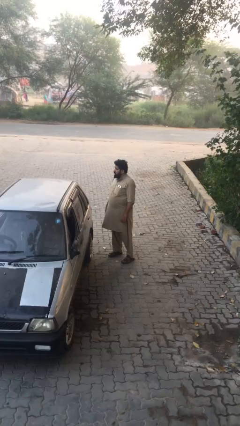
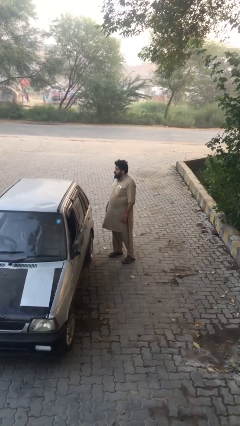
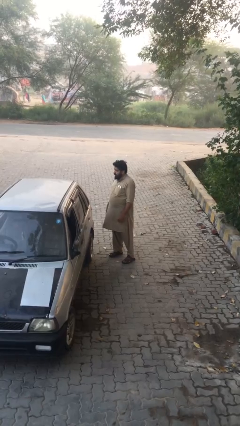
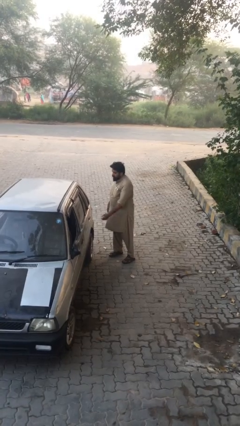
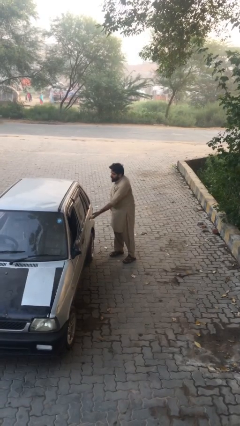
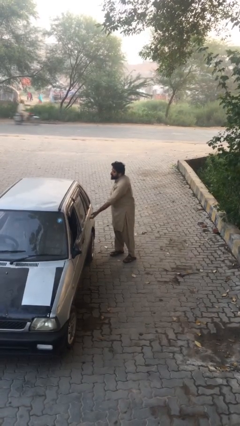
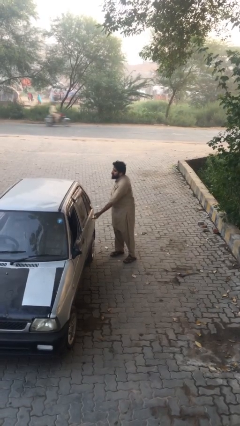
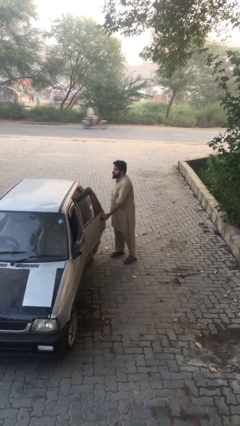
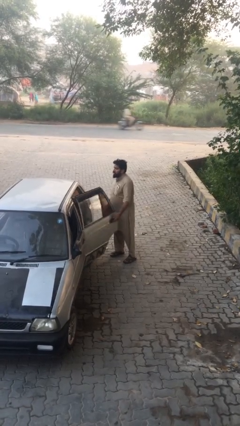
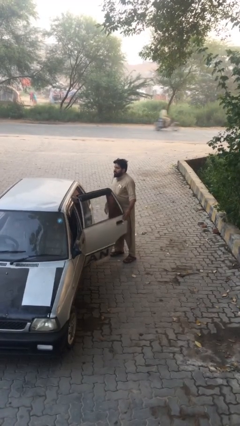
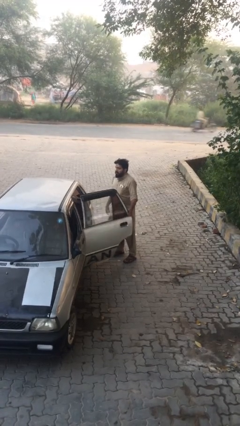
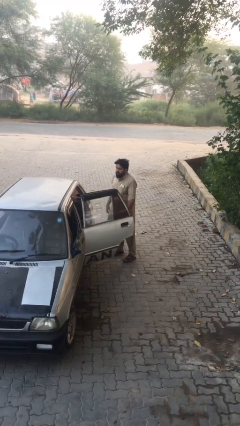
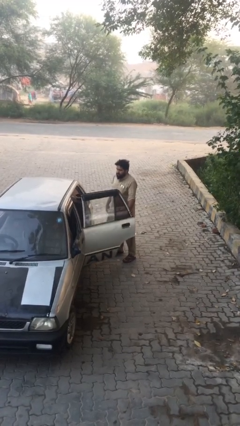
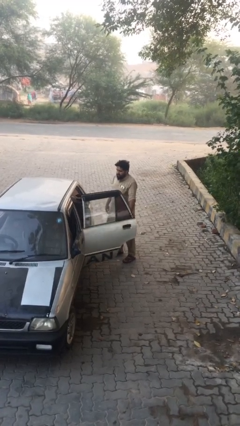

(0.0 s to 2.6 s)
person opens car door

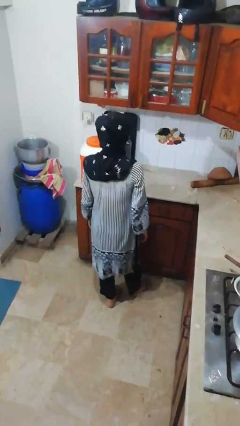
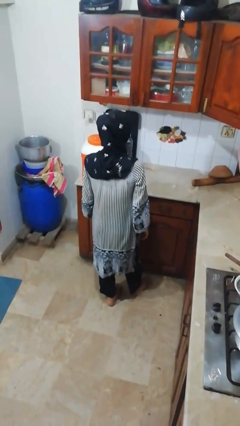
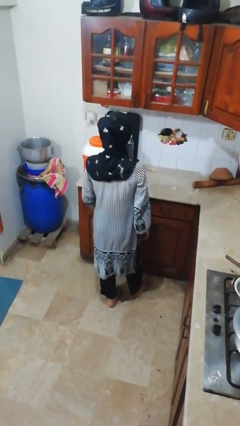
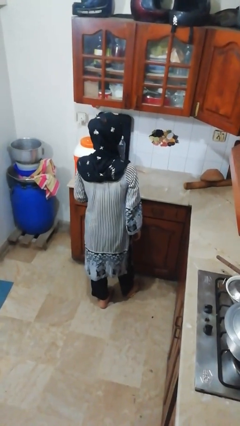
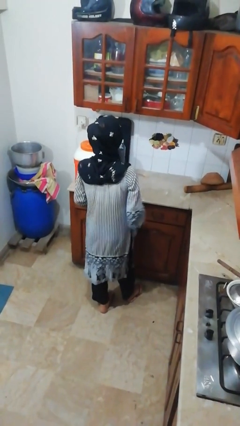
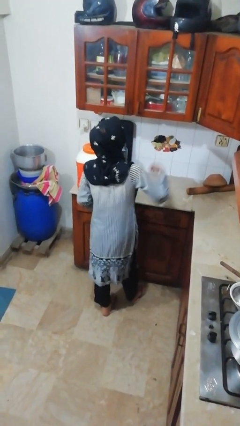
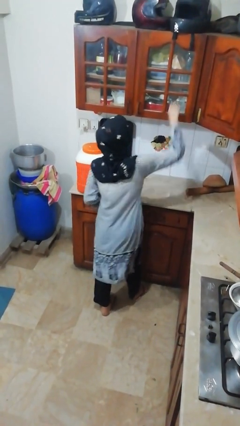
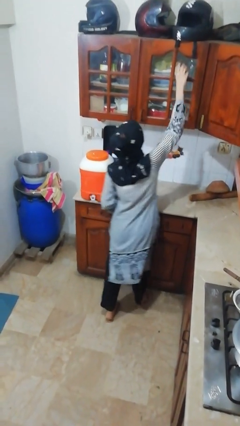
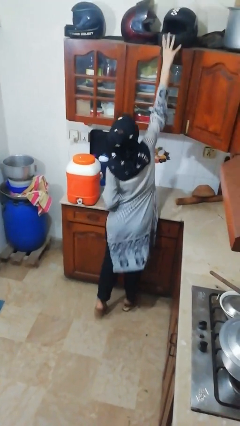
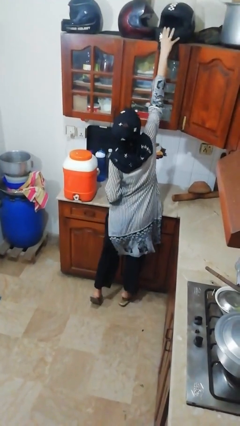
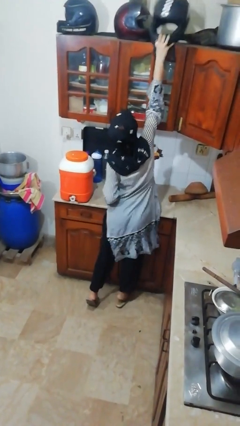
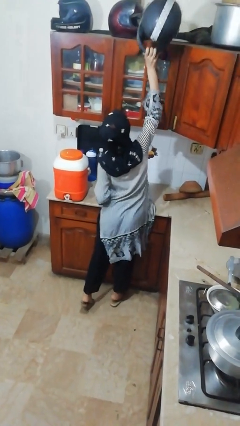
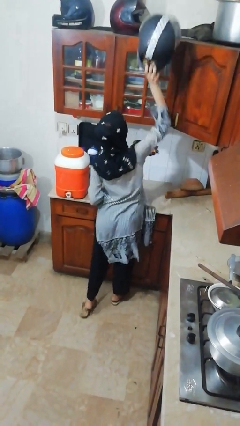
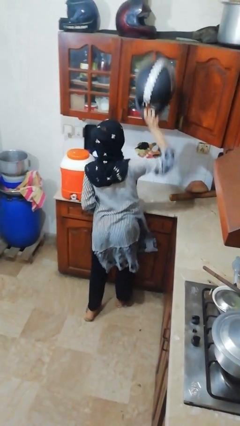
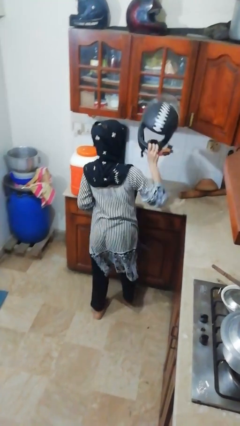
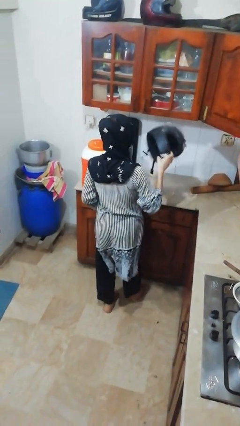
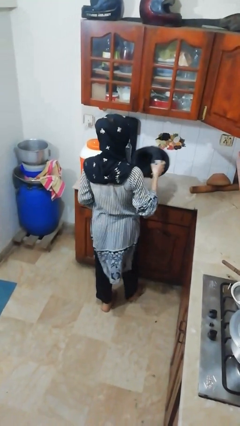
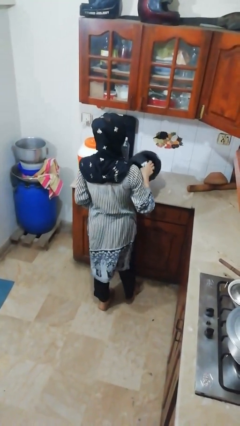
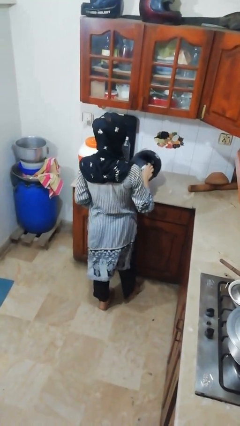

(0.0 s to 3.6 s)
person picks up object from shelf

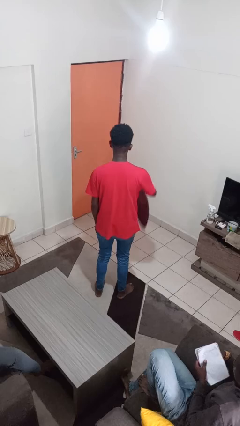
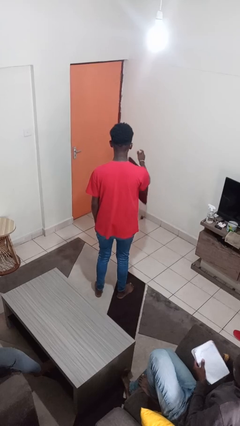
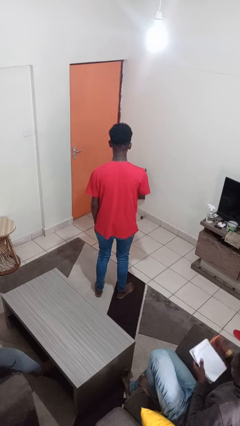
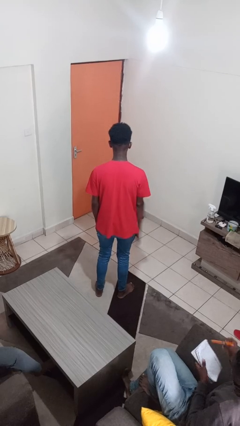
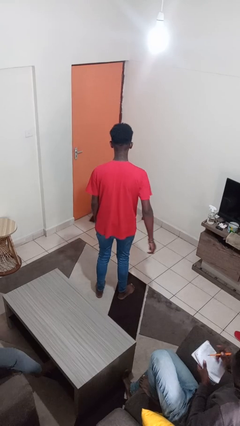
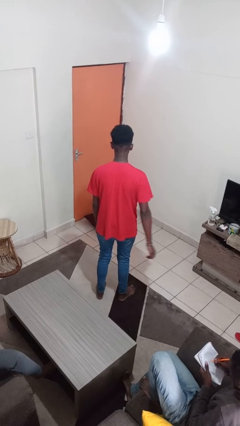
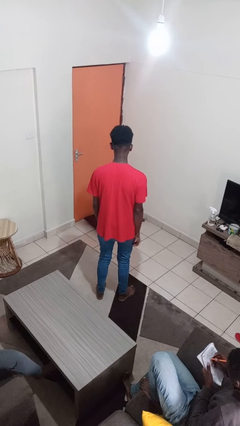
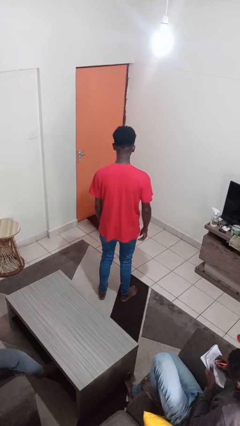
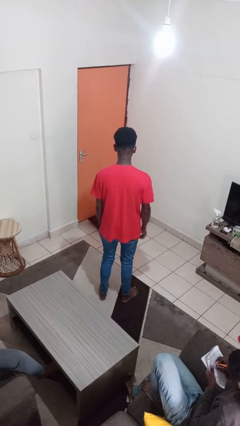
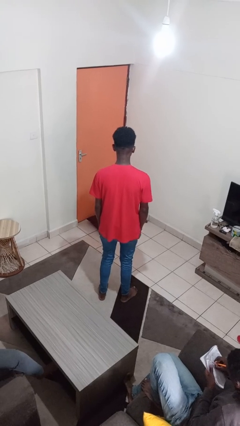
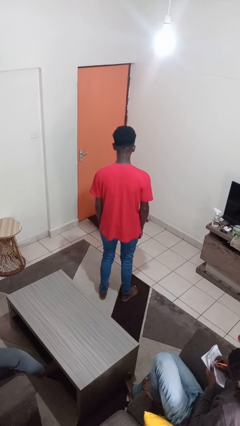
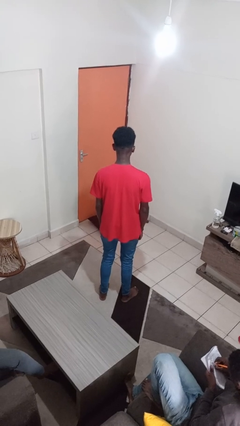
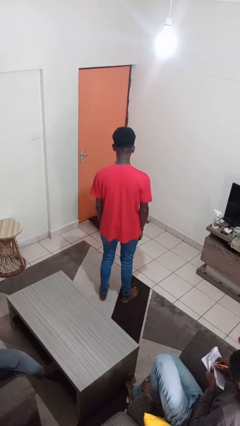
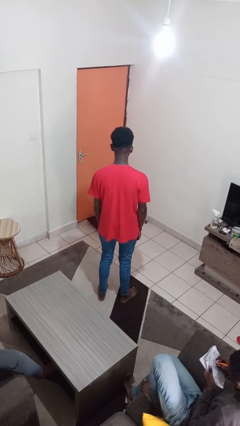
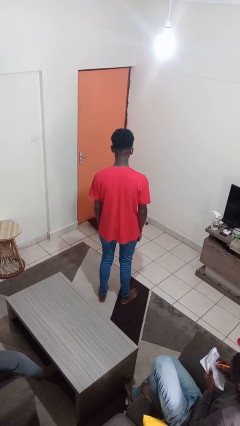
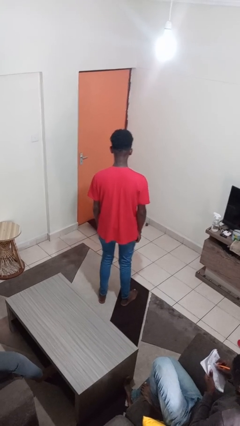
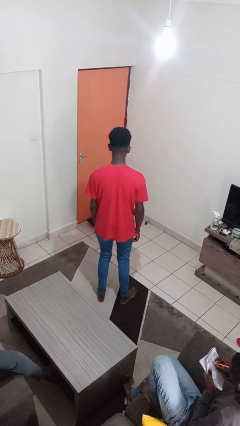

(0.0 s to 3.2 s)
person throws object to ground

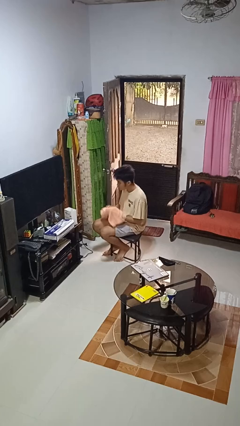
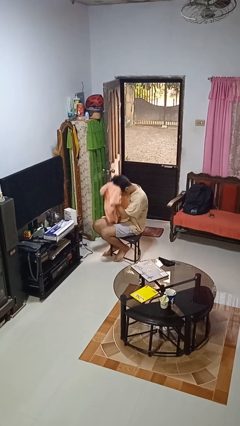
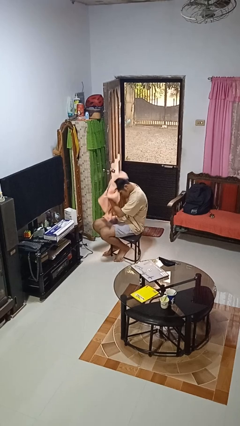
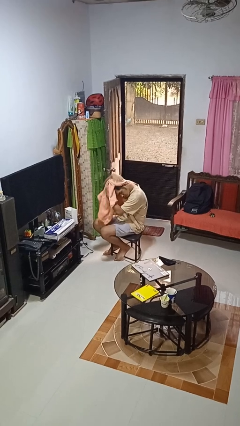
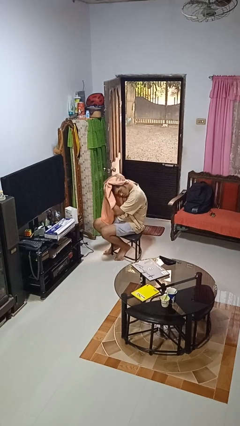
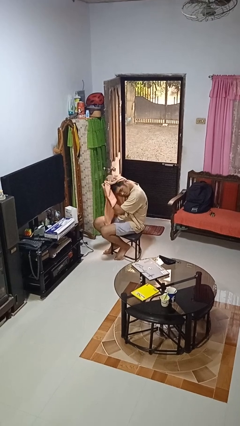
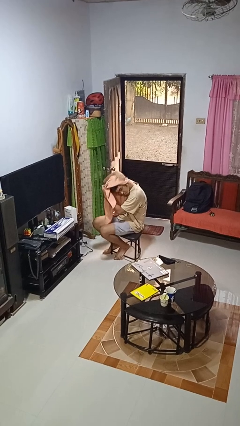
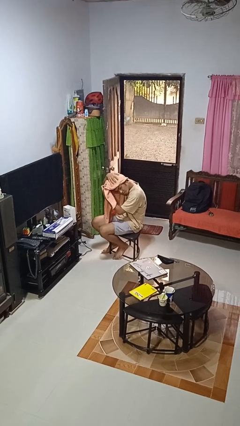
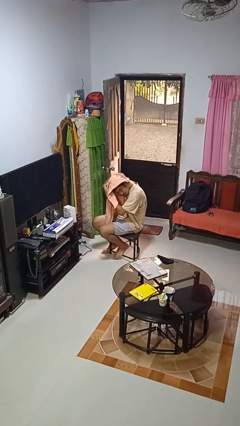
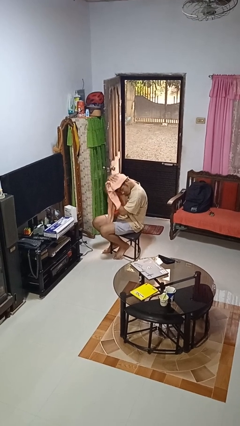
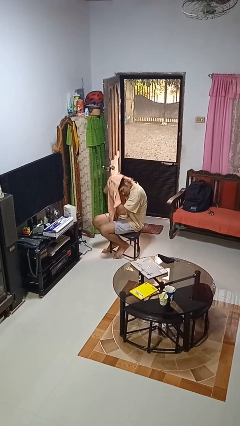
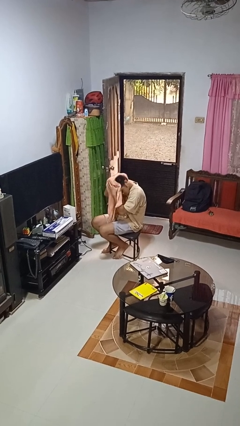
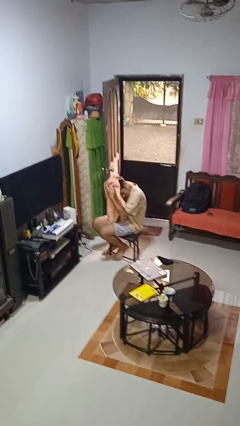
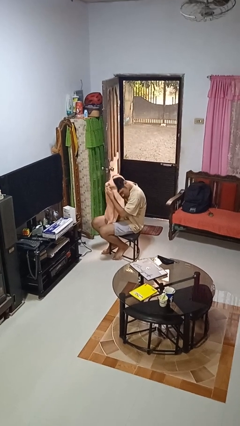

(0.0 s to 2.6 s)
person dries hair with towel

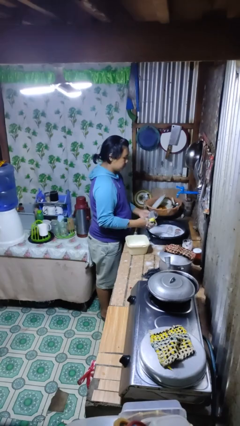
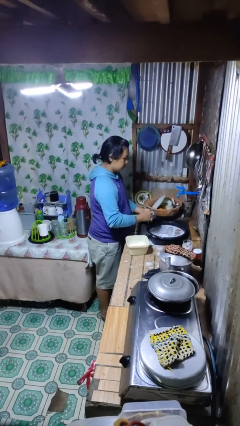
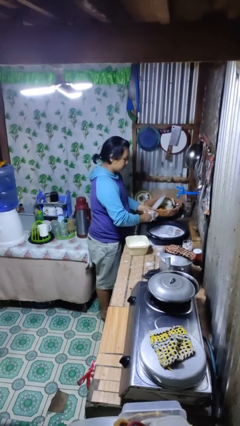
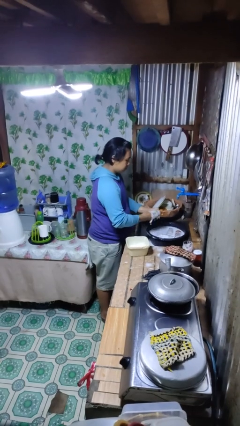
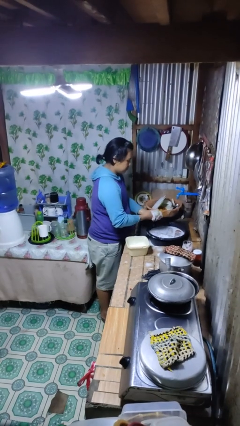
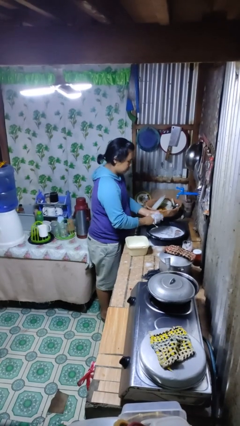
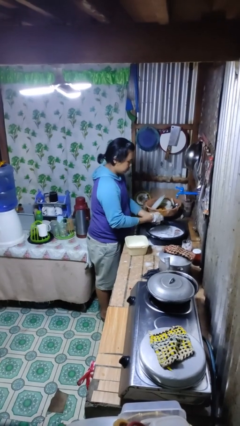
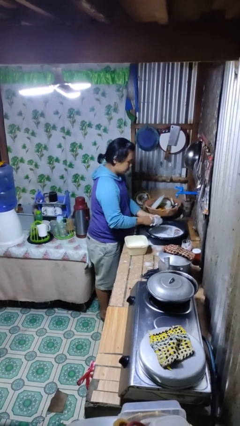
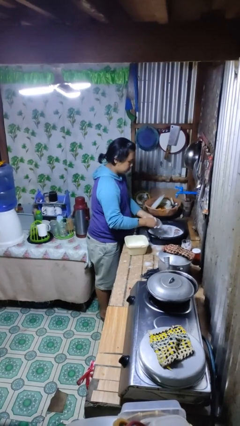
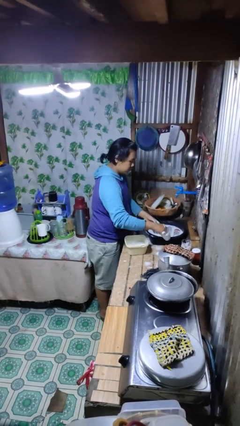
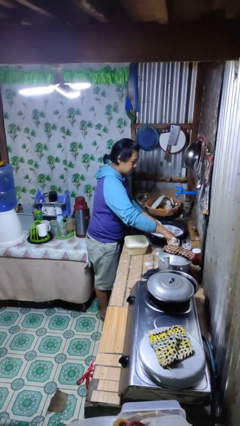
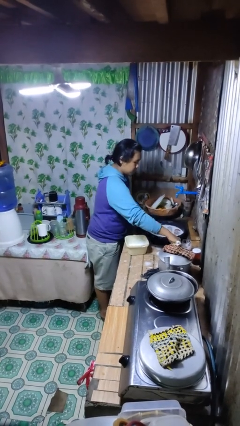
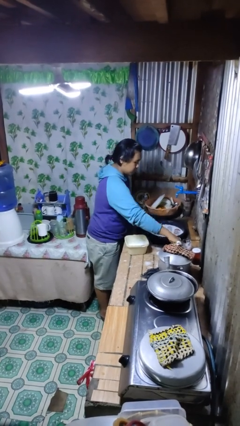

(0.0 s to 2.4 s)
person washes dish

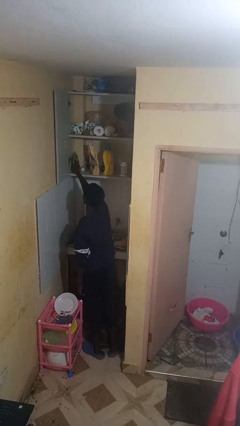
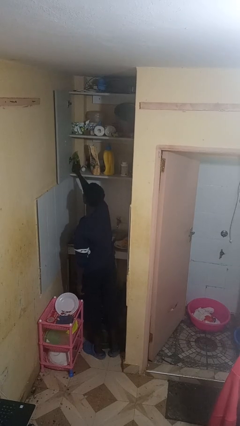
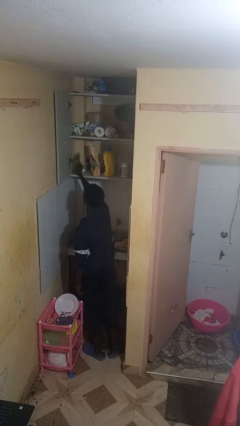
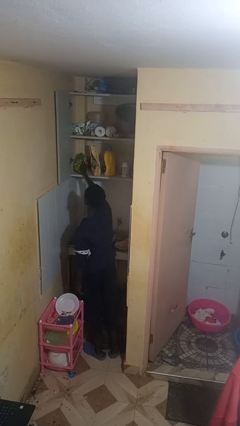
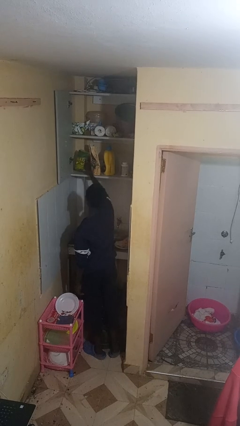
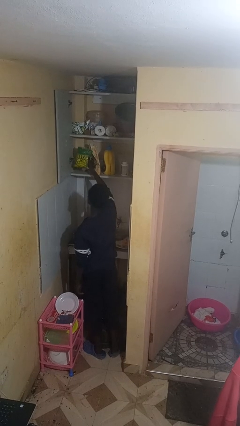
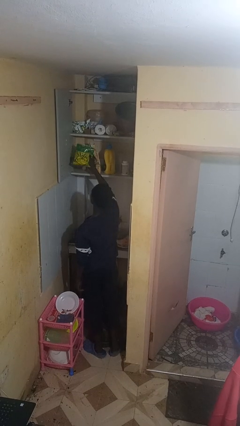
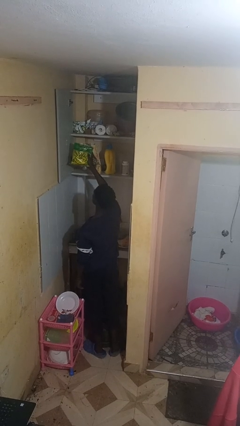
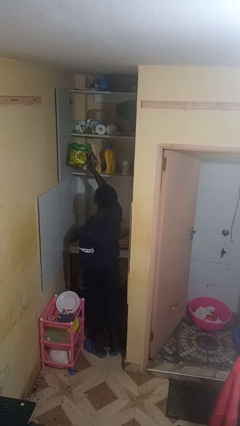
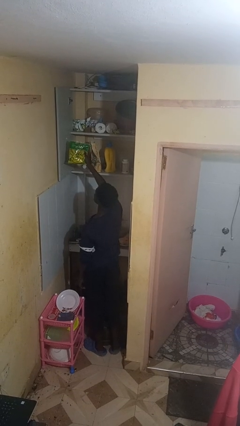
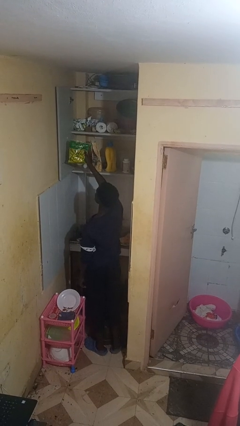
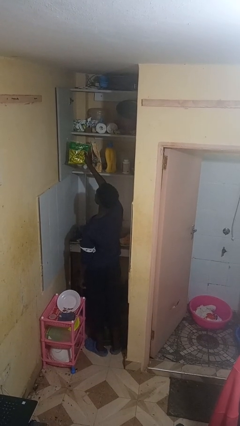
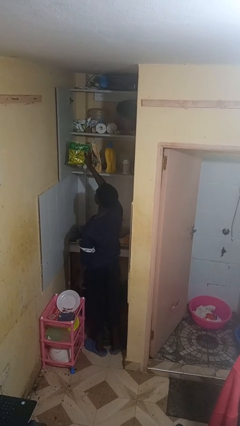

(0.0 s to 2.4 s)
person takes object from cabinet

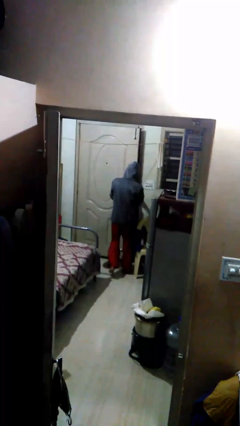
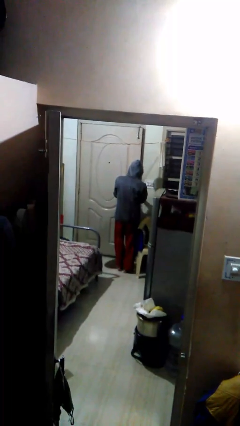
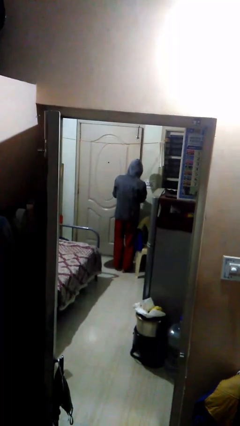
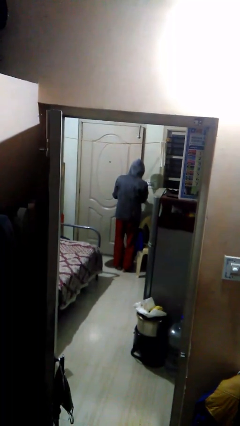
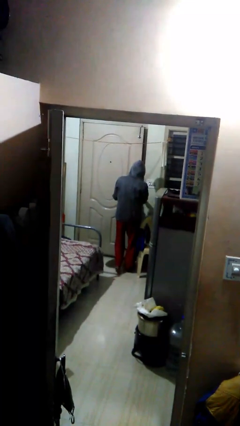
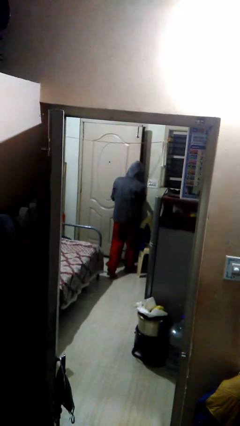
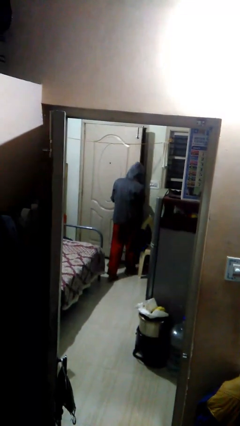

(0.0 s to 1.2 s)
person closes facility door
